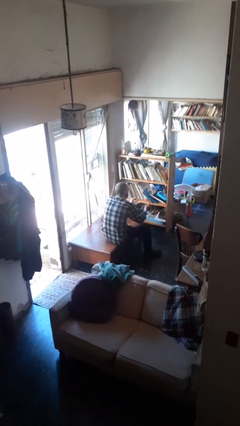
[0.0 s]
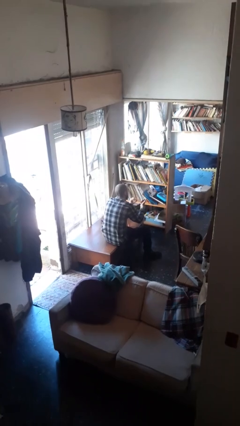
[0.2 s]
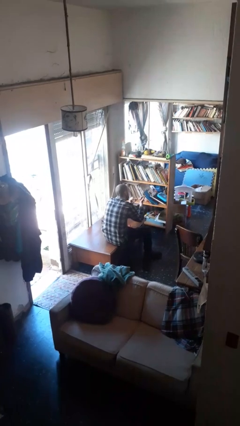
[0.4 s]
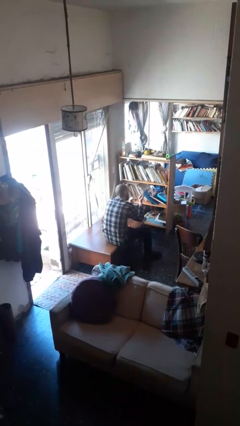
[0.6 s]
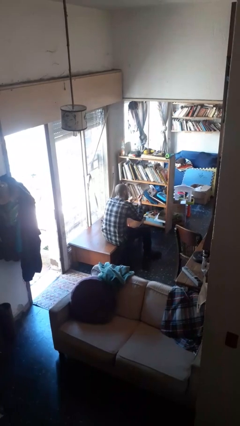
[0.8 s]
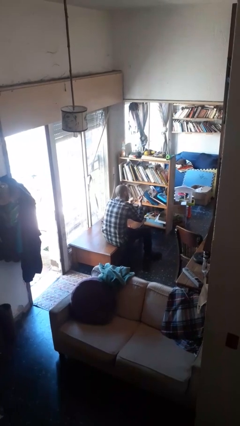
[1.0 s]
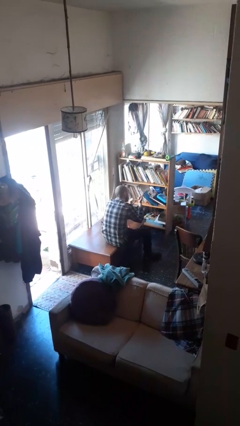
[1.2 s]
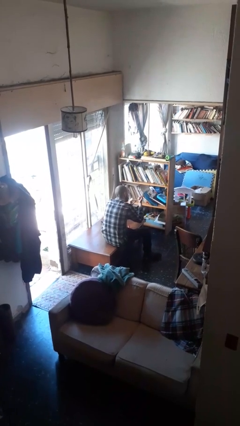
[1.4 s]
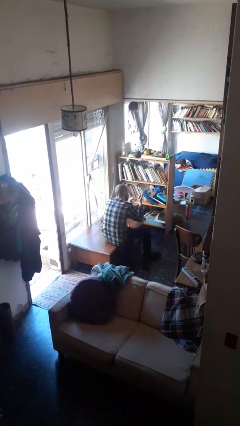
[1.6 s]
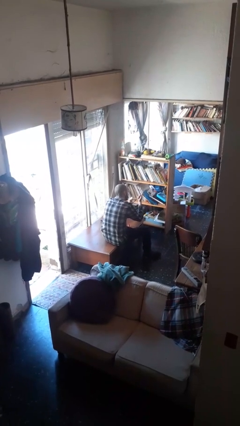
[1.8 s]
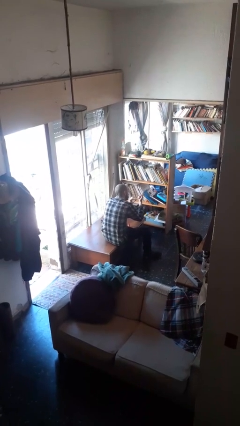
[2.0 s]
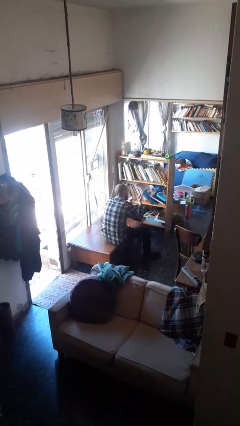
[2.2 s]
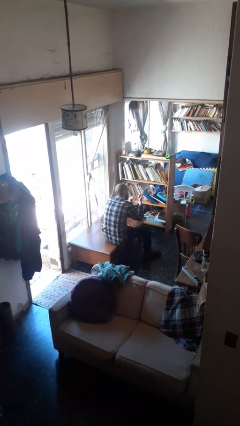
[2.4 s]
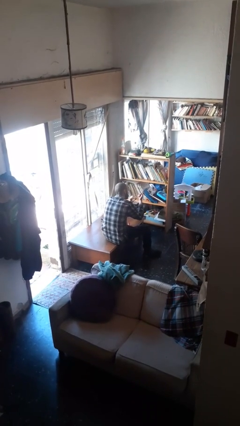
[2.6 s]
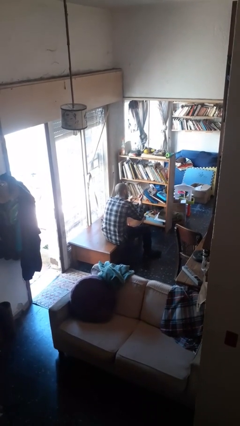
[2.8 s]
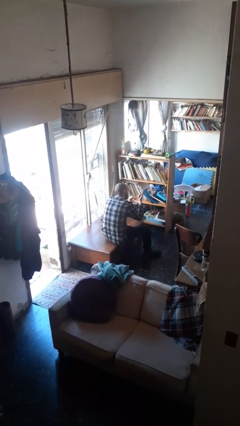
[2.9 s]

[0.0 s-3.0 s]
person paints fingernails

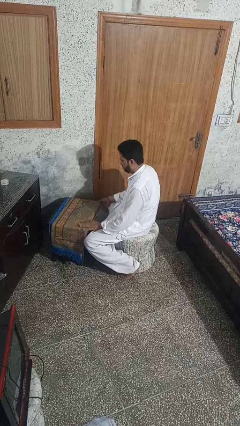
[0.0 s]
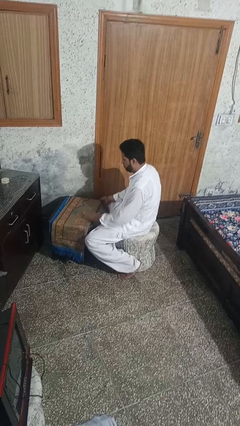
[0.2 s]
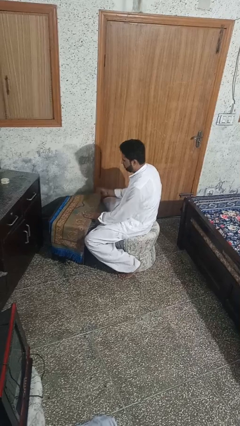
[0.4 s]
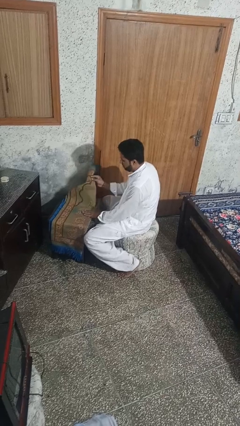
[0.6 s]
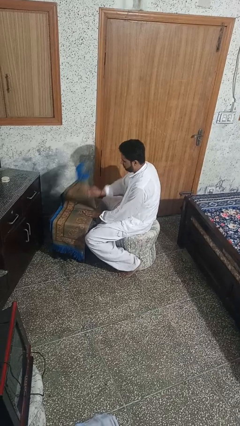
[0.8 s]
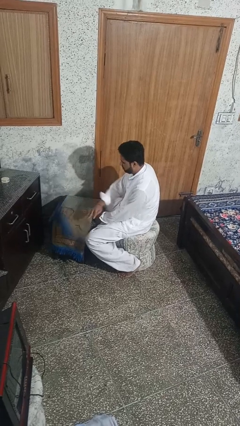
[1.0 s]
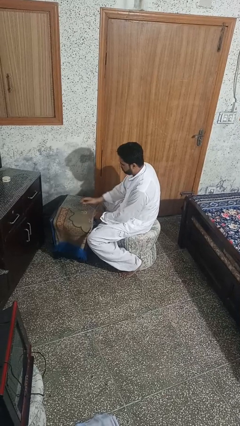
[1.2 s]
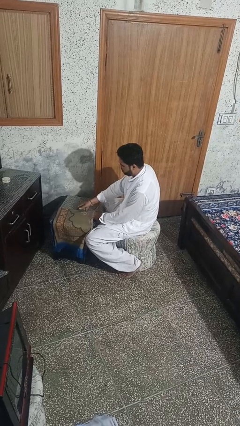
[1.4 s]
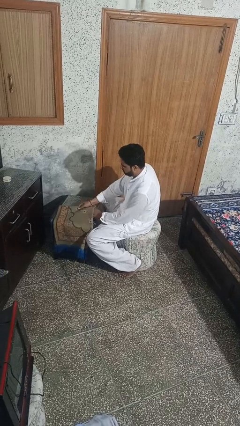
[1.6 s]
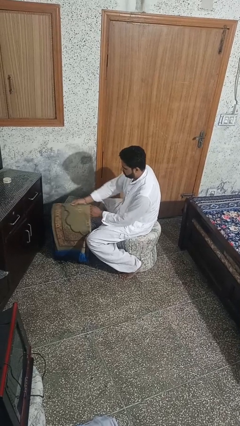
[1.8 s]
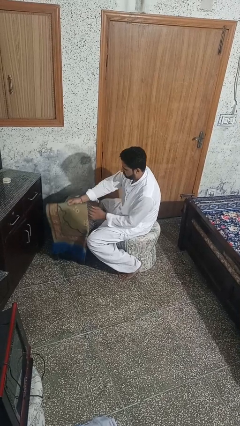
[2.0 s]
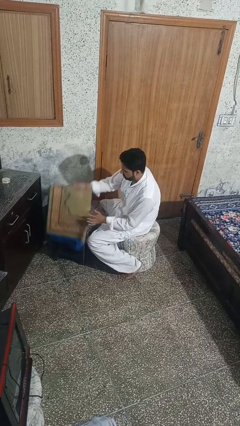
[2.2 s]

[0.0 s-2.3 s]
person folds tablecloth

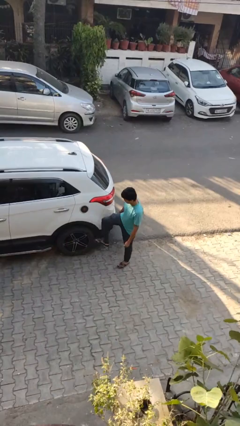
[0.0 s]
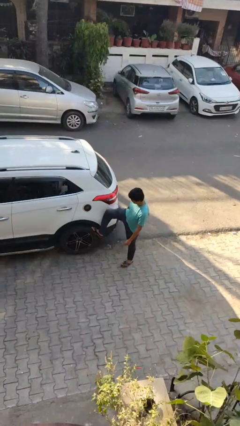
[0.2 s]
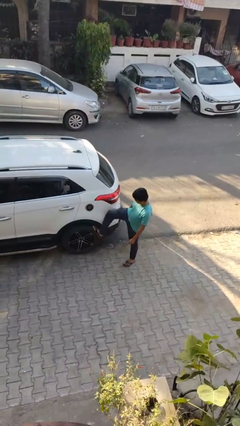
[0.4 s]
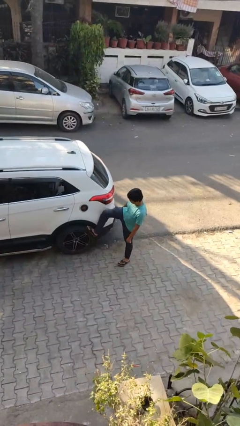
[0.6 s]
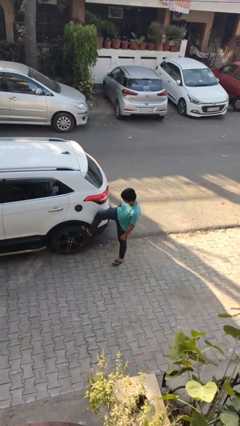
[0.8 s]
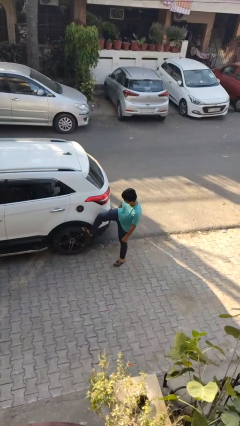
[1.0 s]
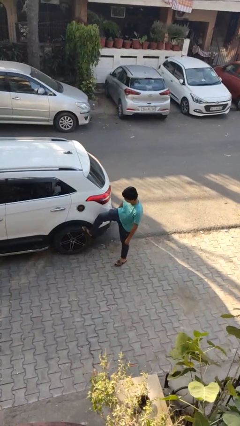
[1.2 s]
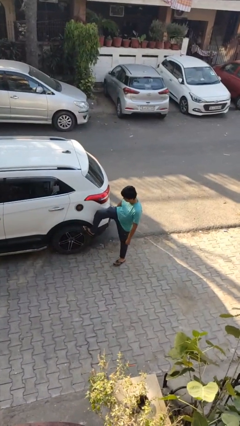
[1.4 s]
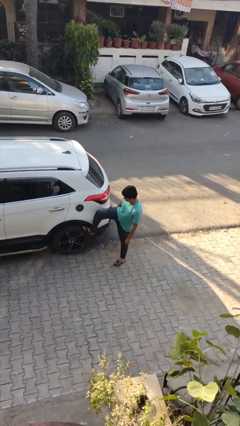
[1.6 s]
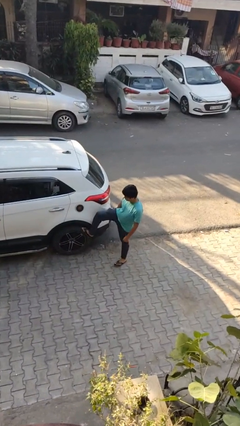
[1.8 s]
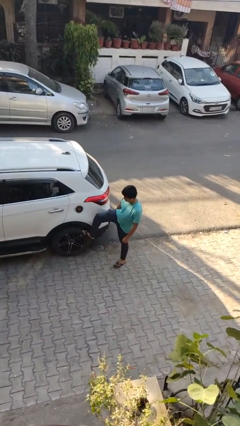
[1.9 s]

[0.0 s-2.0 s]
person kicks car tires

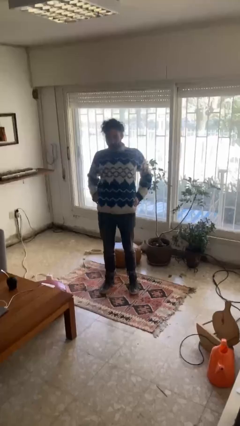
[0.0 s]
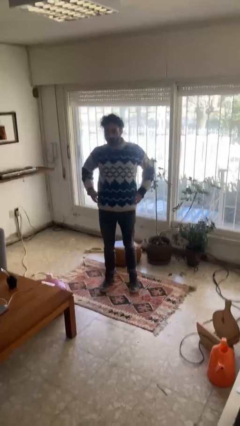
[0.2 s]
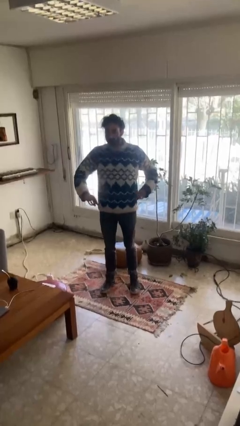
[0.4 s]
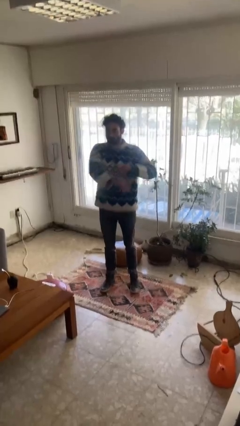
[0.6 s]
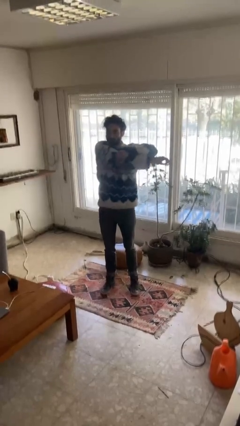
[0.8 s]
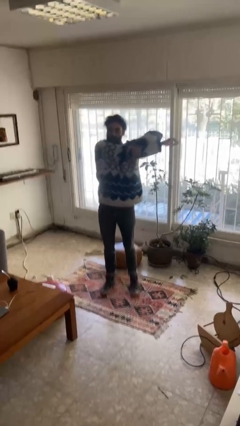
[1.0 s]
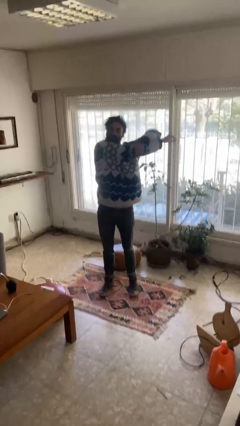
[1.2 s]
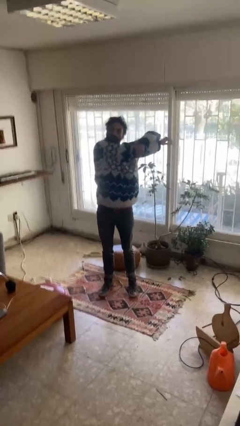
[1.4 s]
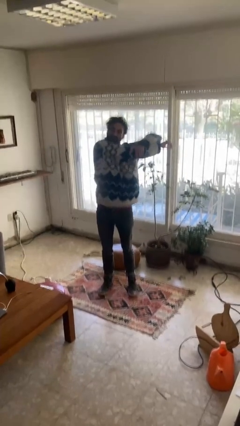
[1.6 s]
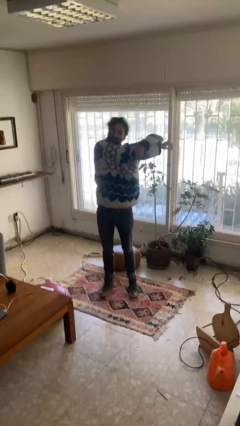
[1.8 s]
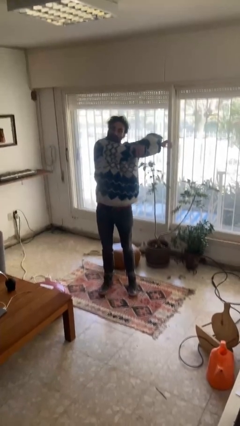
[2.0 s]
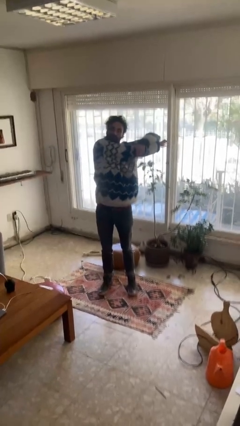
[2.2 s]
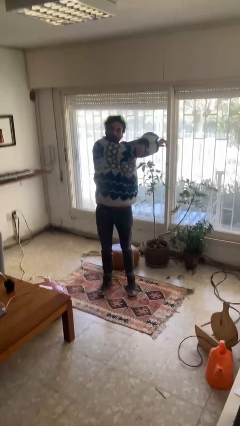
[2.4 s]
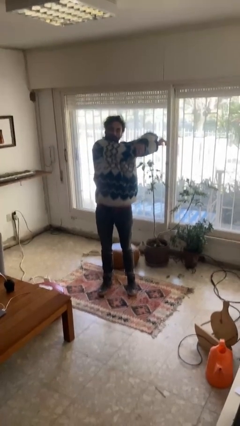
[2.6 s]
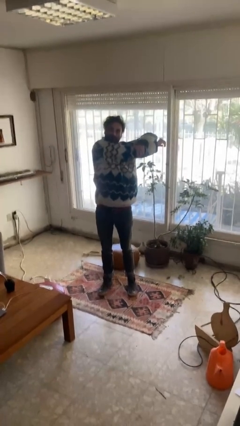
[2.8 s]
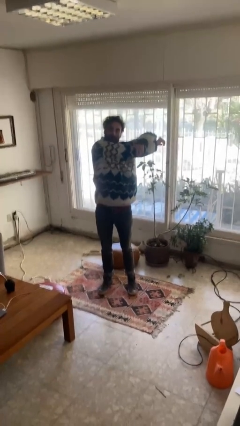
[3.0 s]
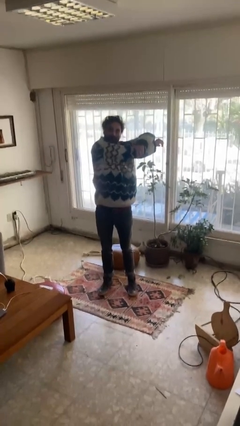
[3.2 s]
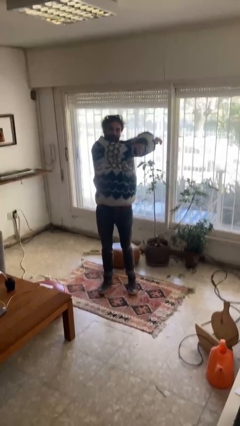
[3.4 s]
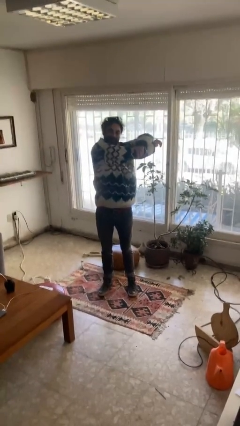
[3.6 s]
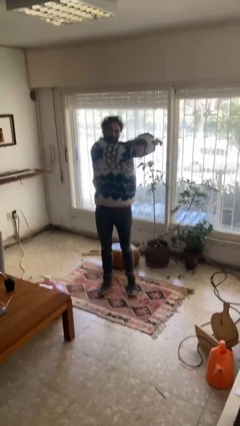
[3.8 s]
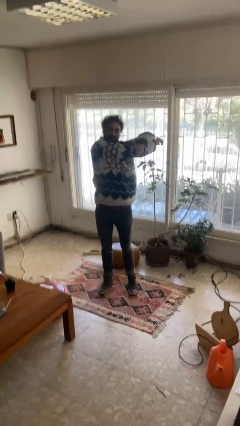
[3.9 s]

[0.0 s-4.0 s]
person stretches arms to side

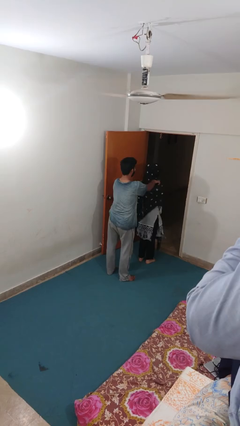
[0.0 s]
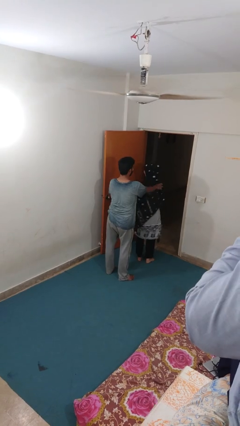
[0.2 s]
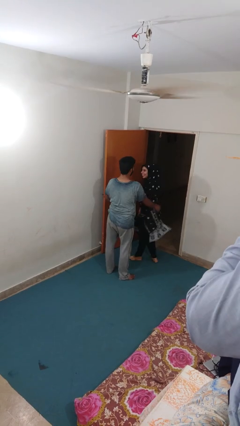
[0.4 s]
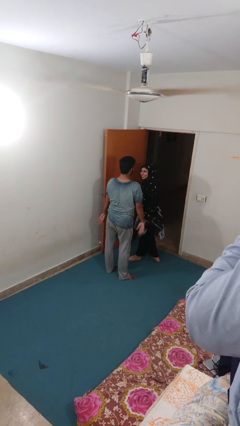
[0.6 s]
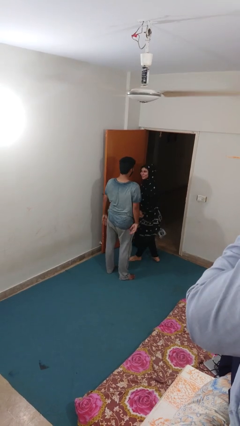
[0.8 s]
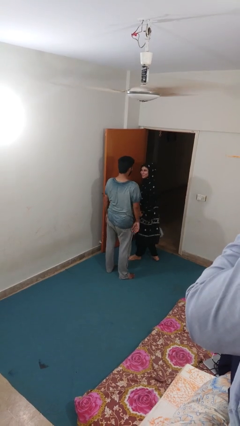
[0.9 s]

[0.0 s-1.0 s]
person spins person around

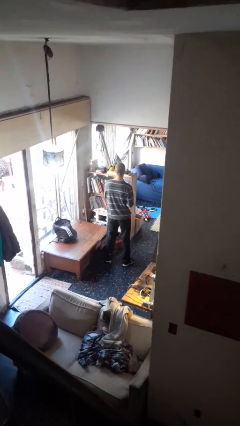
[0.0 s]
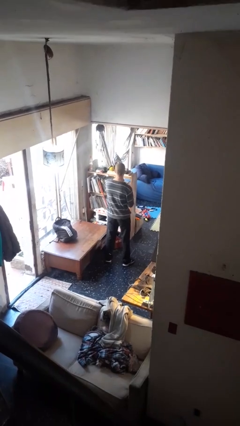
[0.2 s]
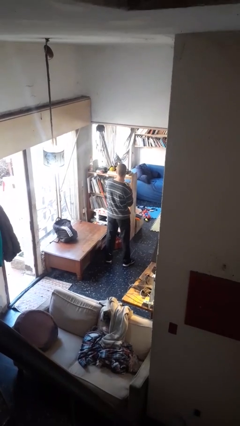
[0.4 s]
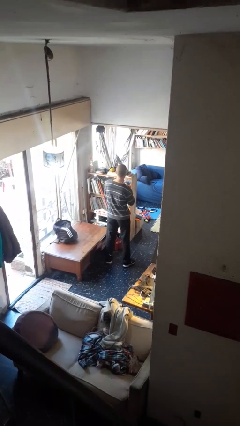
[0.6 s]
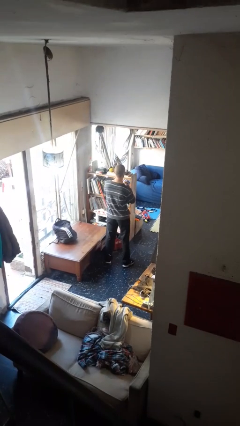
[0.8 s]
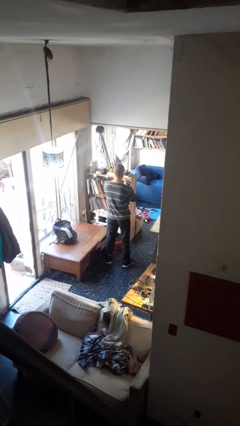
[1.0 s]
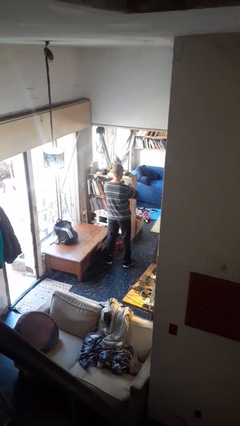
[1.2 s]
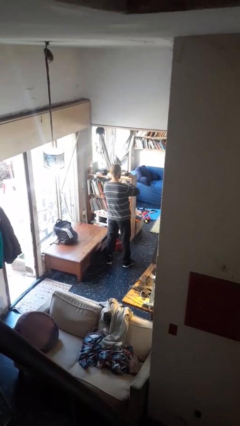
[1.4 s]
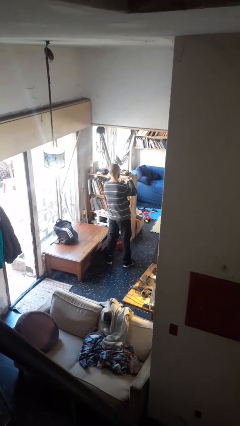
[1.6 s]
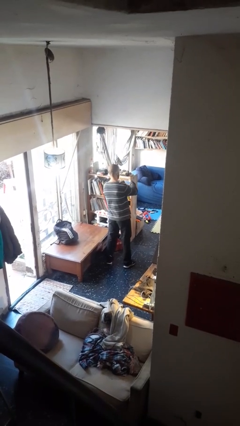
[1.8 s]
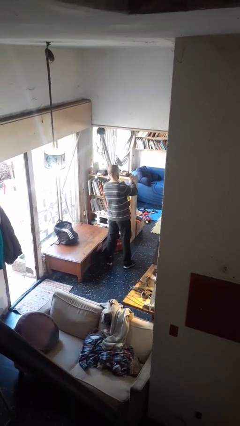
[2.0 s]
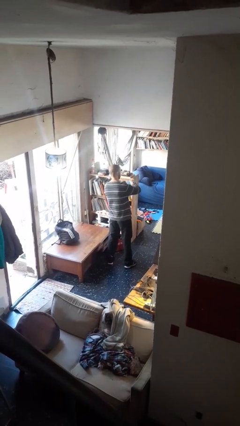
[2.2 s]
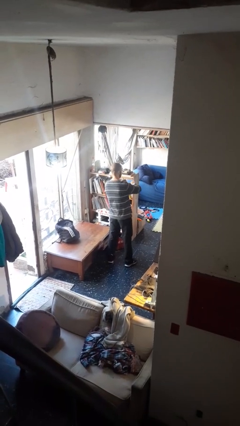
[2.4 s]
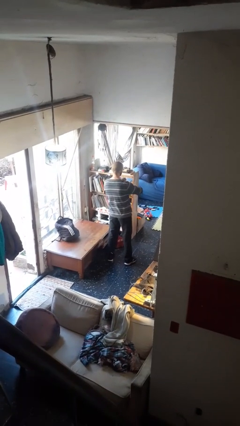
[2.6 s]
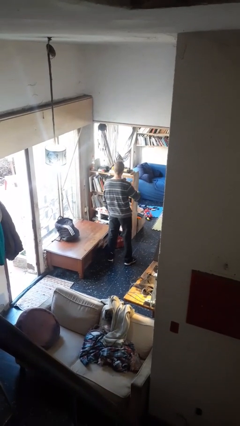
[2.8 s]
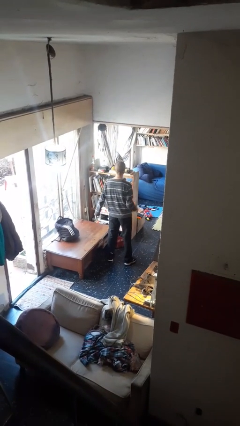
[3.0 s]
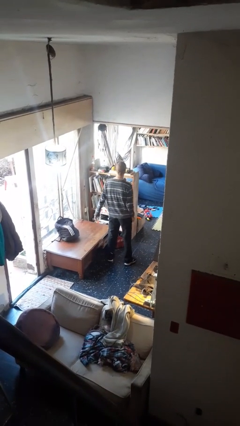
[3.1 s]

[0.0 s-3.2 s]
person puts on wristwatch

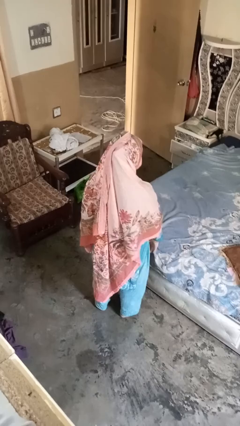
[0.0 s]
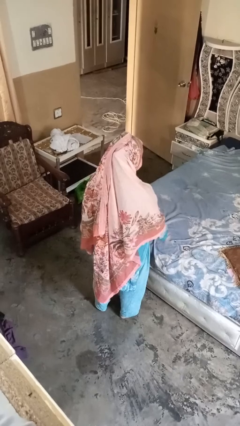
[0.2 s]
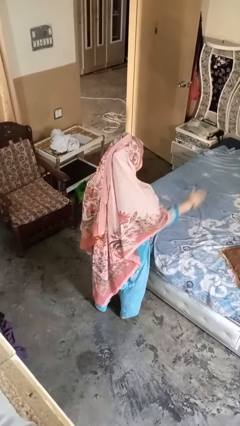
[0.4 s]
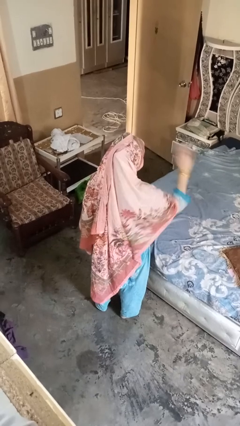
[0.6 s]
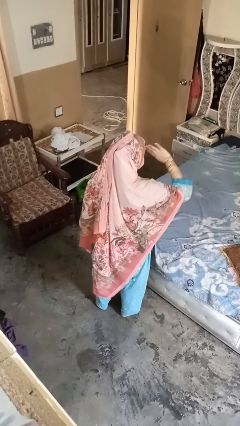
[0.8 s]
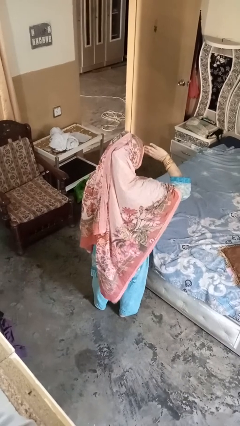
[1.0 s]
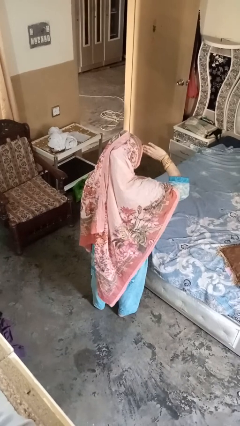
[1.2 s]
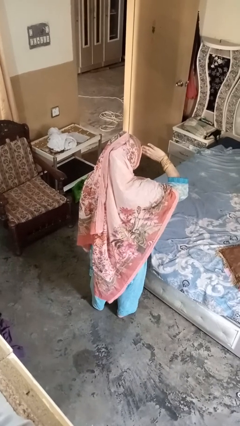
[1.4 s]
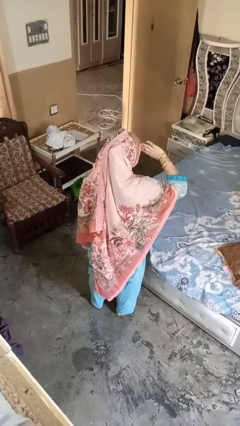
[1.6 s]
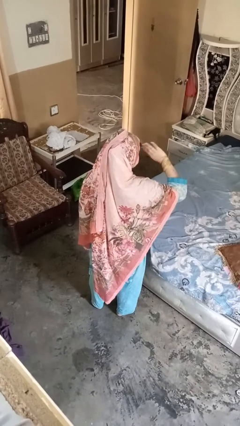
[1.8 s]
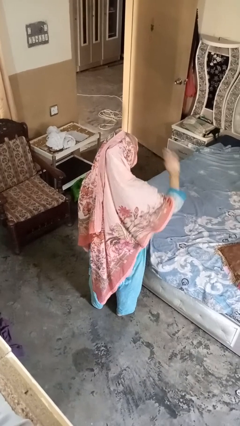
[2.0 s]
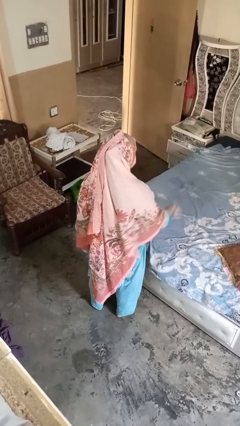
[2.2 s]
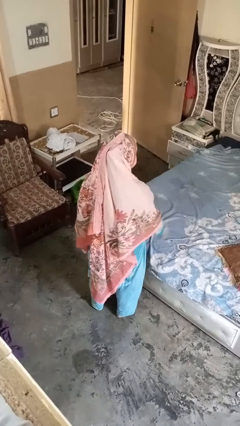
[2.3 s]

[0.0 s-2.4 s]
person salutes
